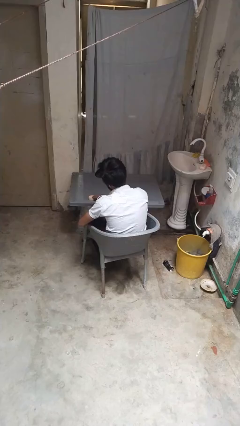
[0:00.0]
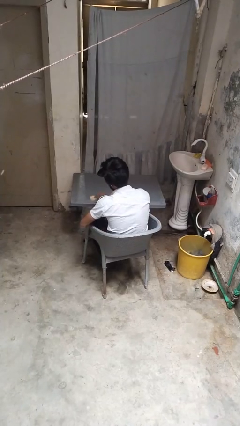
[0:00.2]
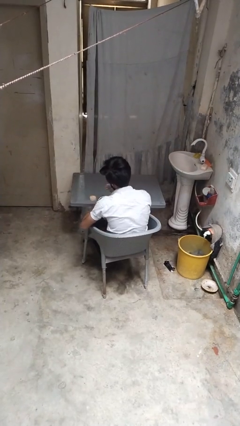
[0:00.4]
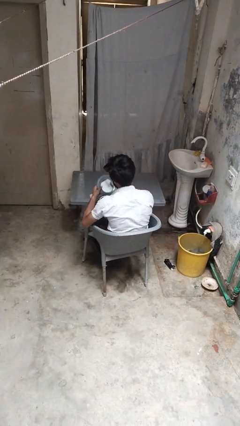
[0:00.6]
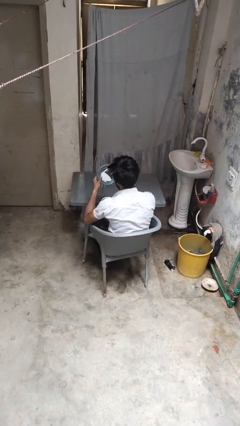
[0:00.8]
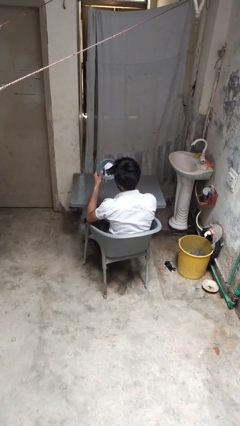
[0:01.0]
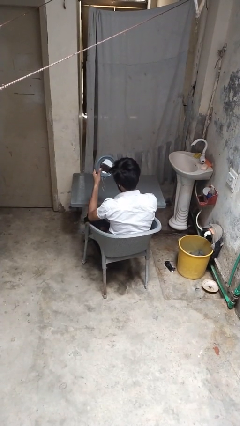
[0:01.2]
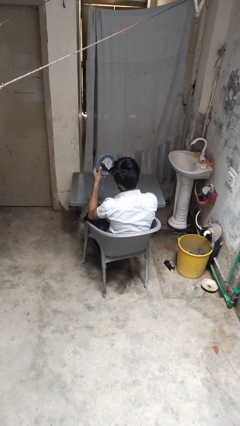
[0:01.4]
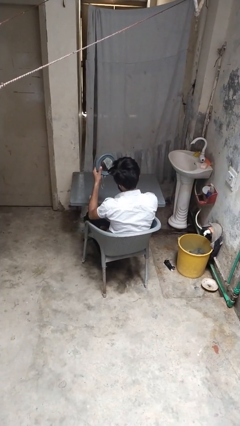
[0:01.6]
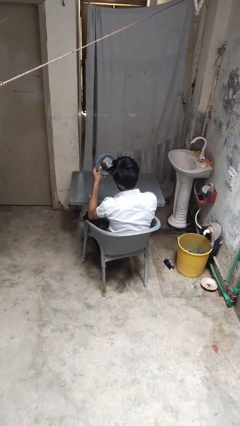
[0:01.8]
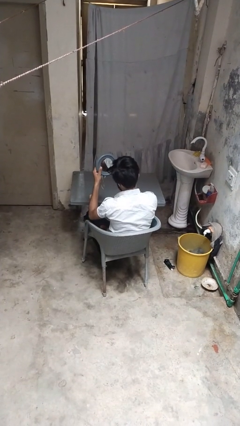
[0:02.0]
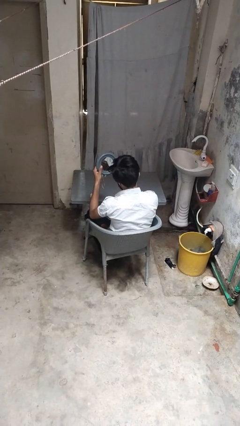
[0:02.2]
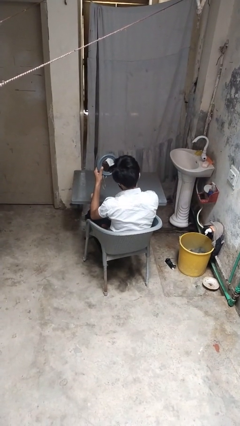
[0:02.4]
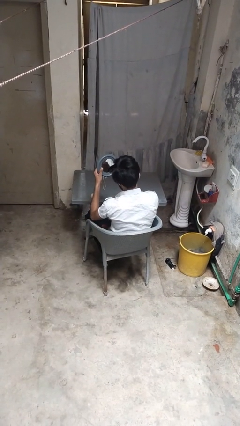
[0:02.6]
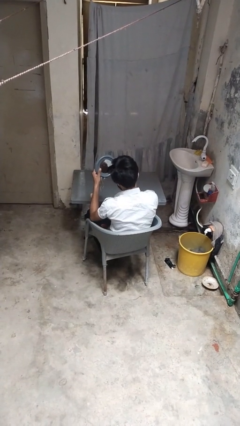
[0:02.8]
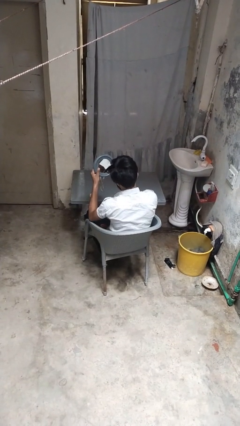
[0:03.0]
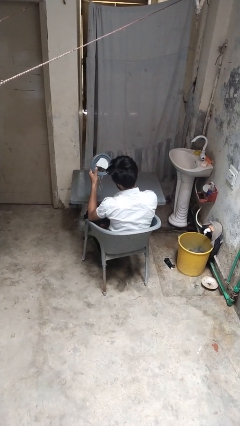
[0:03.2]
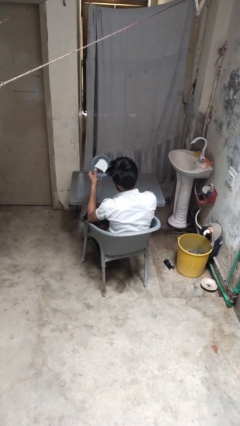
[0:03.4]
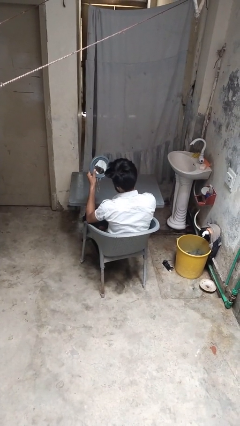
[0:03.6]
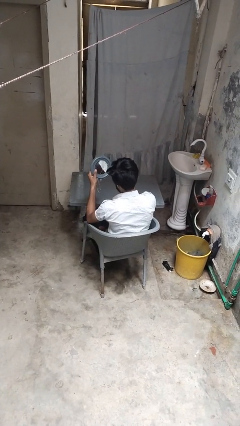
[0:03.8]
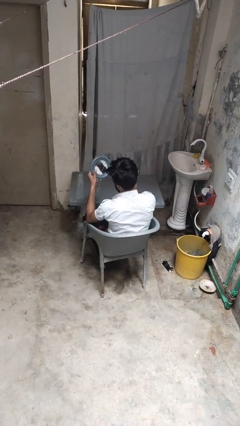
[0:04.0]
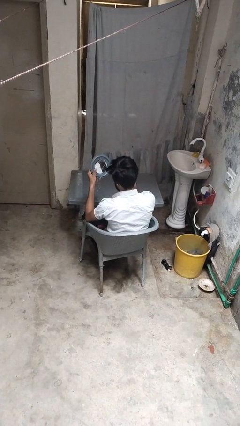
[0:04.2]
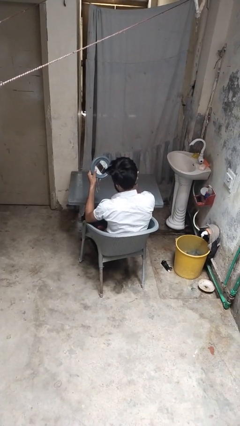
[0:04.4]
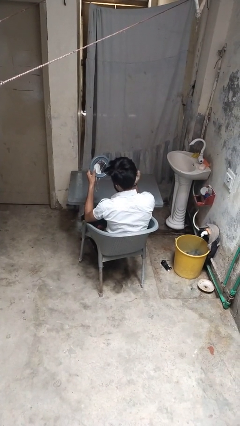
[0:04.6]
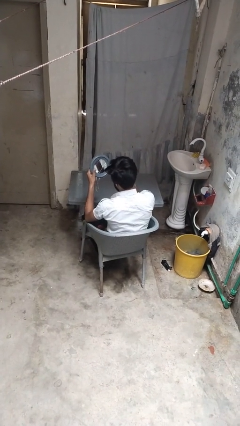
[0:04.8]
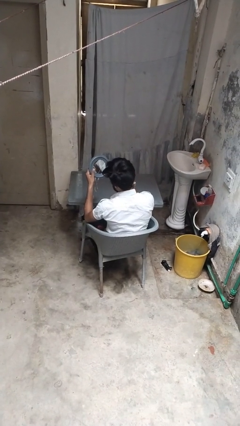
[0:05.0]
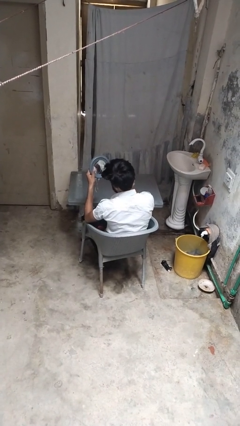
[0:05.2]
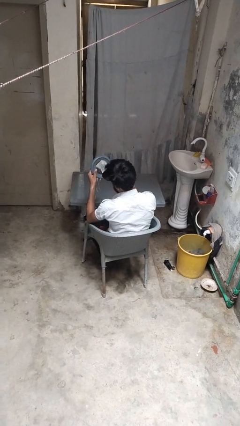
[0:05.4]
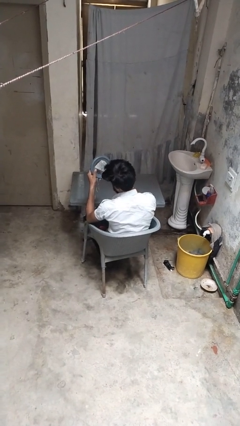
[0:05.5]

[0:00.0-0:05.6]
person applies foundation makeup

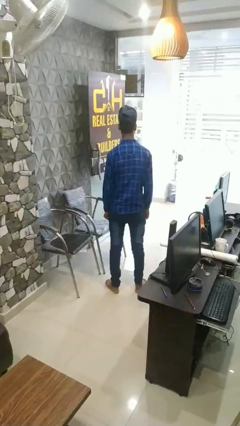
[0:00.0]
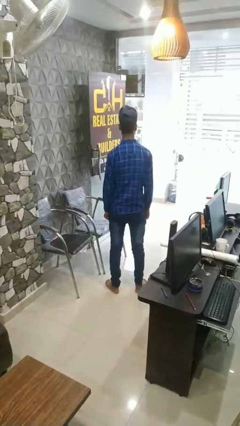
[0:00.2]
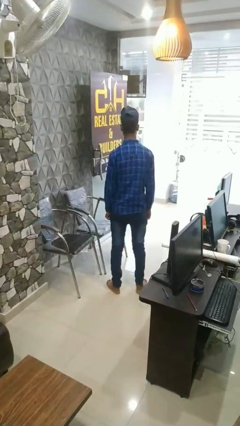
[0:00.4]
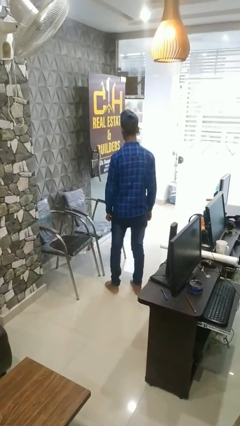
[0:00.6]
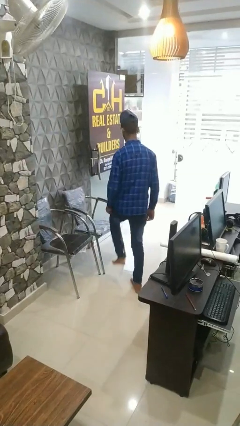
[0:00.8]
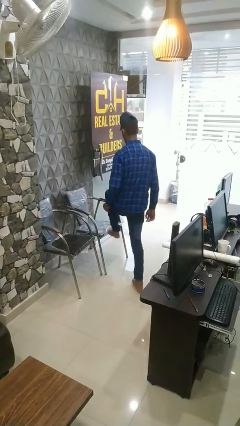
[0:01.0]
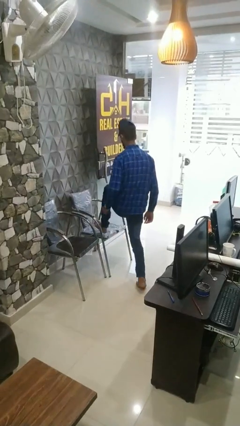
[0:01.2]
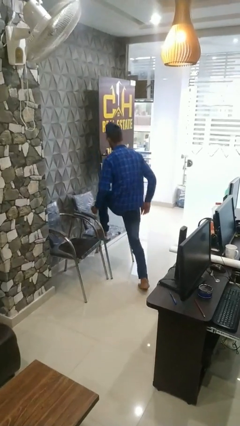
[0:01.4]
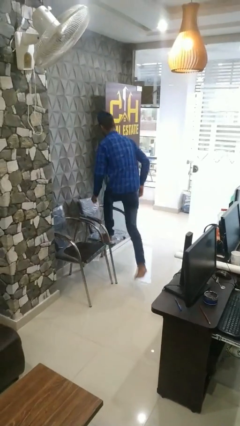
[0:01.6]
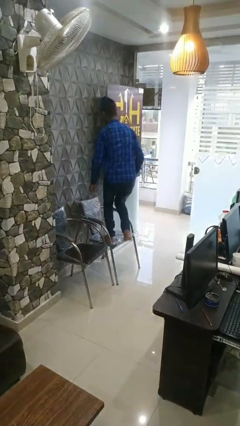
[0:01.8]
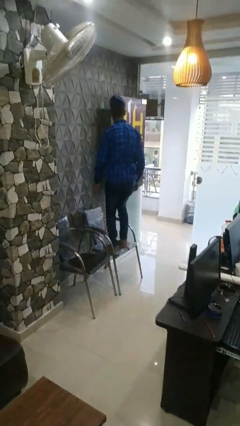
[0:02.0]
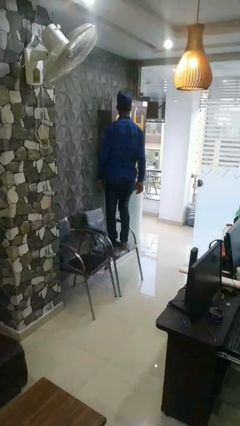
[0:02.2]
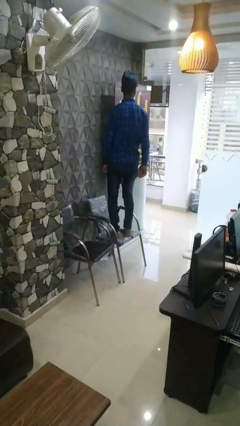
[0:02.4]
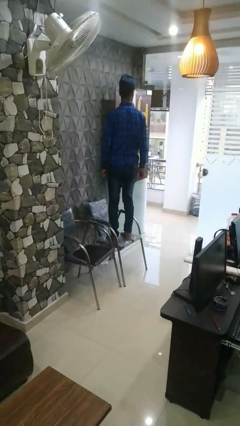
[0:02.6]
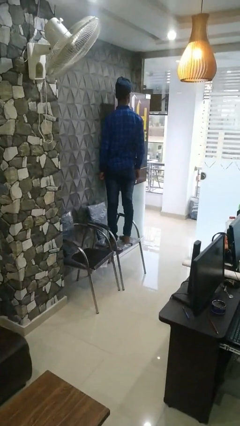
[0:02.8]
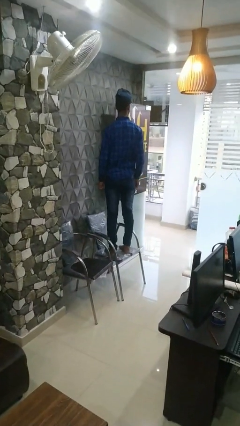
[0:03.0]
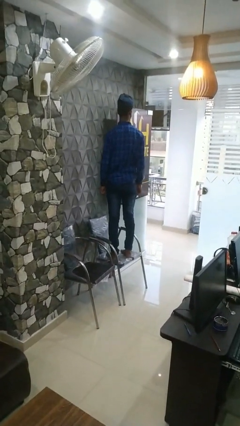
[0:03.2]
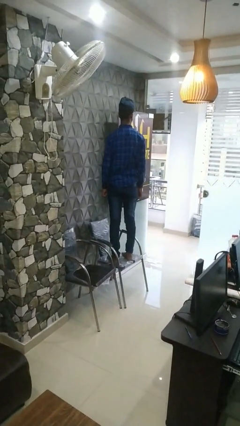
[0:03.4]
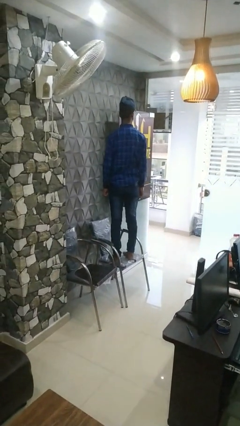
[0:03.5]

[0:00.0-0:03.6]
person climbs on chair

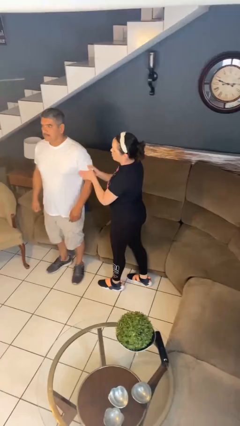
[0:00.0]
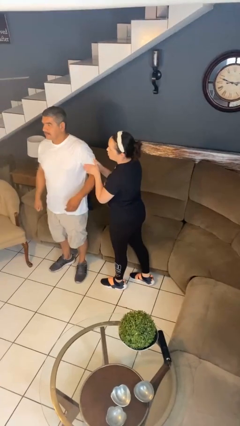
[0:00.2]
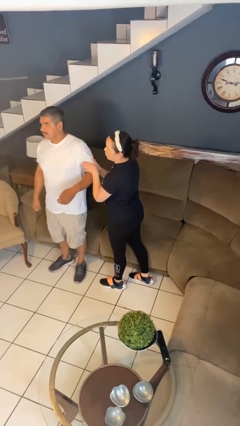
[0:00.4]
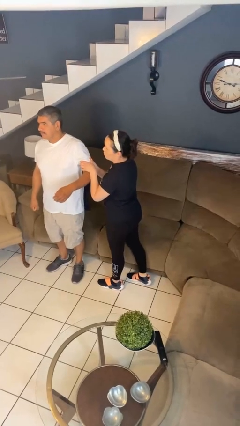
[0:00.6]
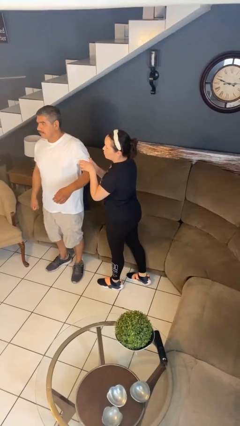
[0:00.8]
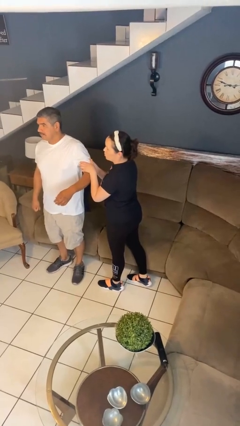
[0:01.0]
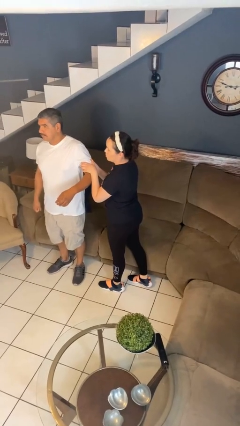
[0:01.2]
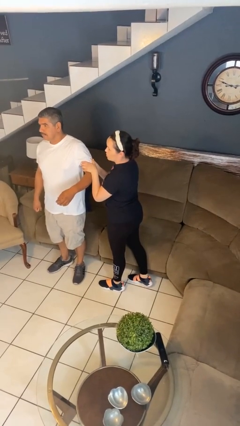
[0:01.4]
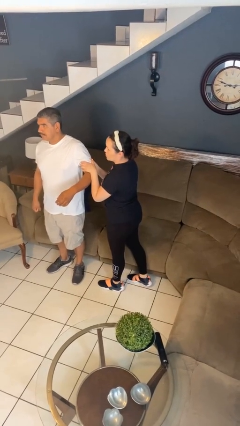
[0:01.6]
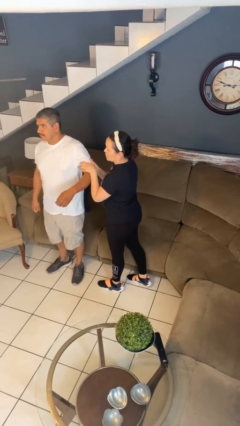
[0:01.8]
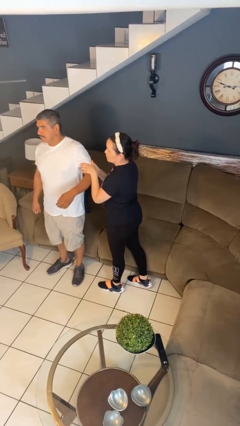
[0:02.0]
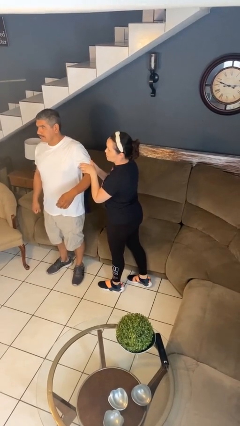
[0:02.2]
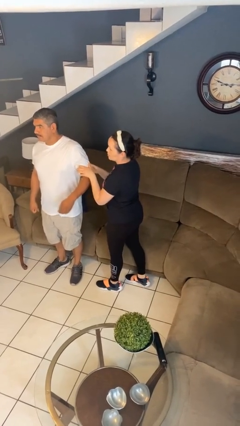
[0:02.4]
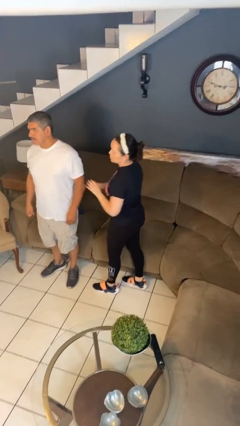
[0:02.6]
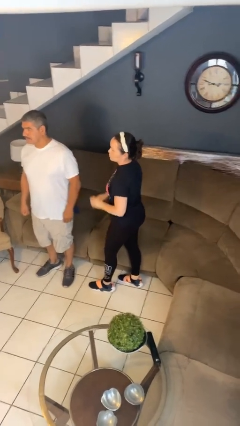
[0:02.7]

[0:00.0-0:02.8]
person grabs person by bicep

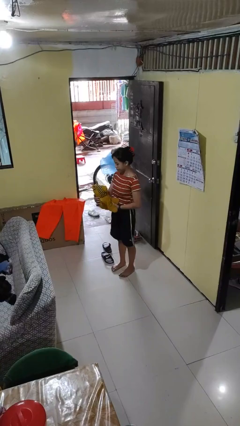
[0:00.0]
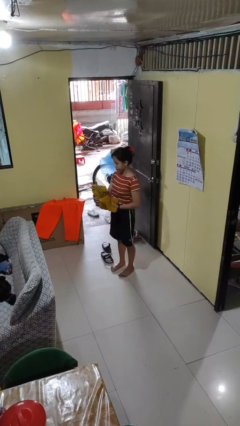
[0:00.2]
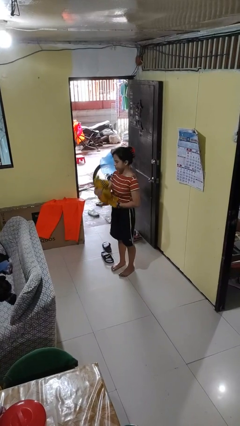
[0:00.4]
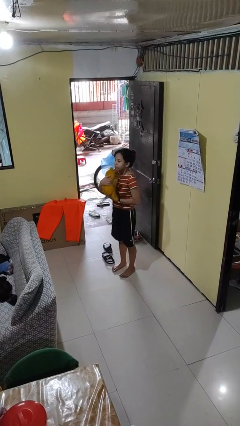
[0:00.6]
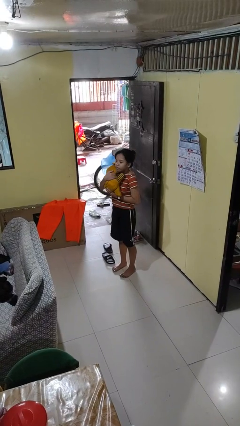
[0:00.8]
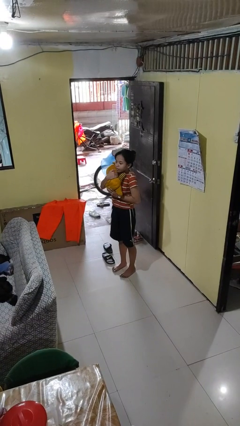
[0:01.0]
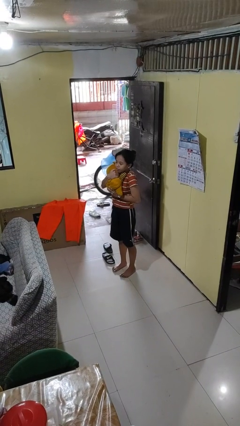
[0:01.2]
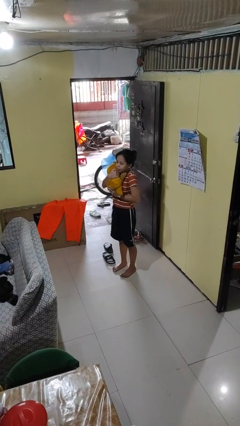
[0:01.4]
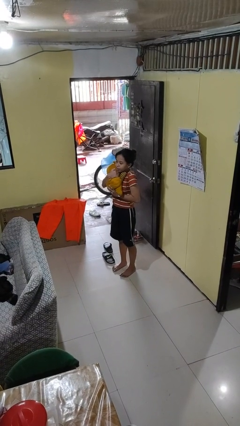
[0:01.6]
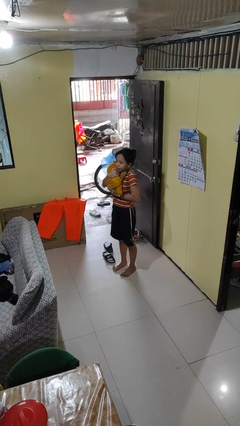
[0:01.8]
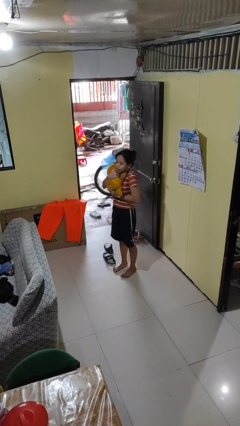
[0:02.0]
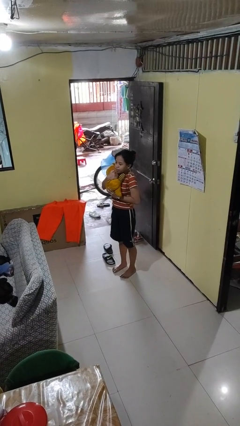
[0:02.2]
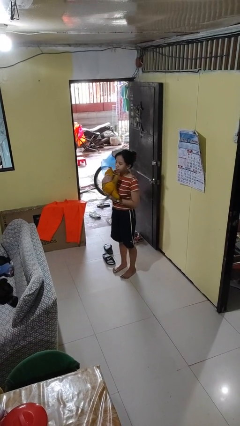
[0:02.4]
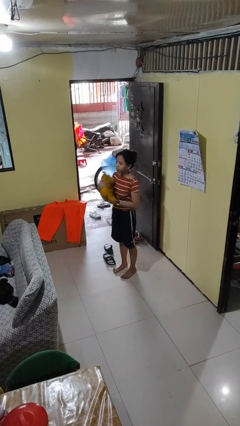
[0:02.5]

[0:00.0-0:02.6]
person hugs stuffed animal

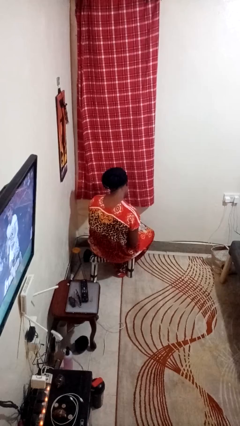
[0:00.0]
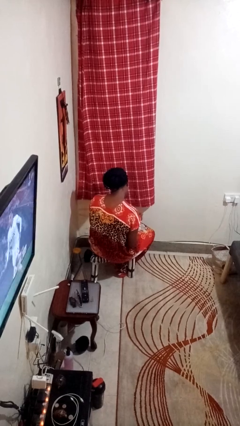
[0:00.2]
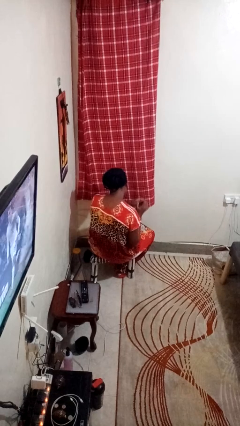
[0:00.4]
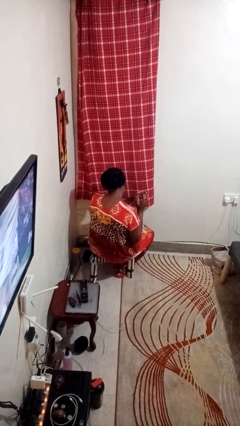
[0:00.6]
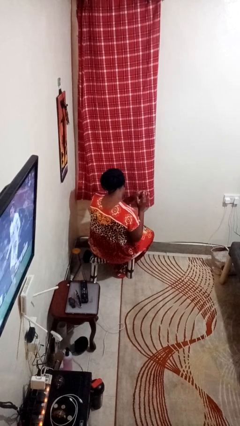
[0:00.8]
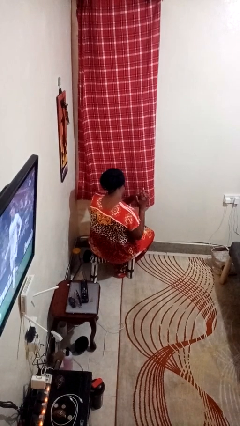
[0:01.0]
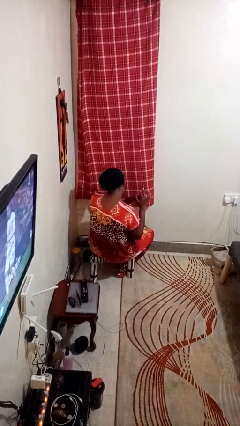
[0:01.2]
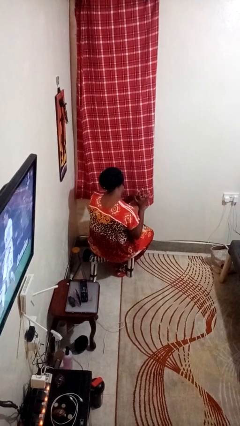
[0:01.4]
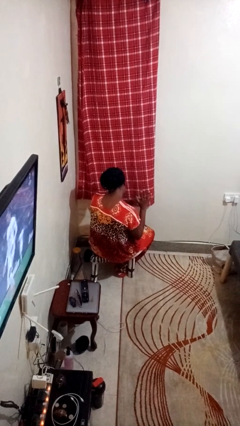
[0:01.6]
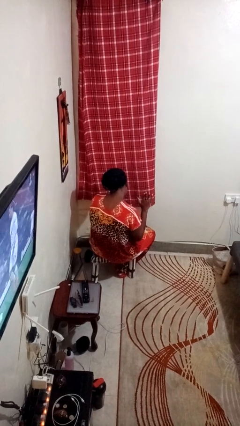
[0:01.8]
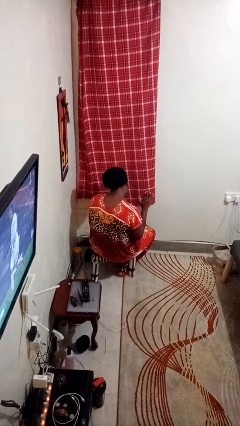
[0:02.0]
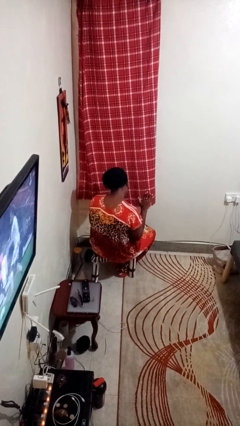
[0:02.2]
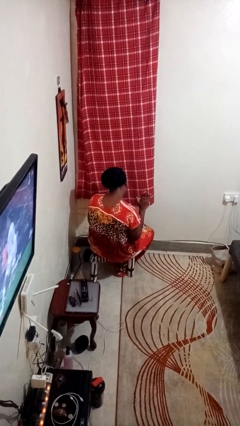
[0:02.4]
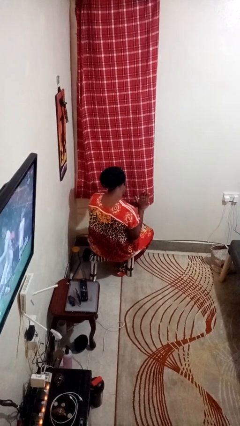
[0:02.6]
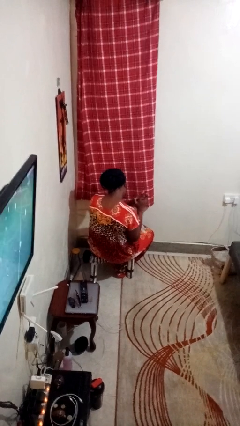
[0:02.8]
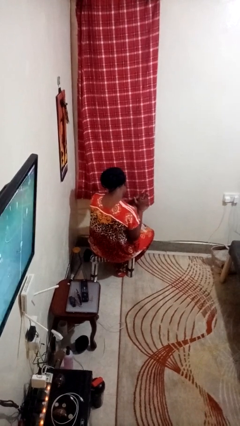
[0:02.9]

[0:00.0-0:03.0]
person puts on ring

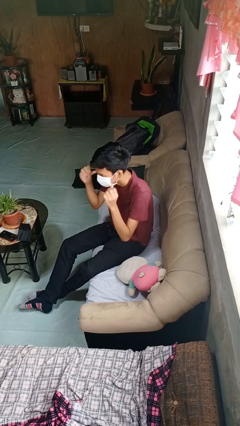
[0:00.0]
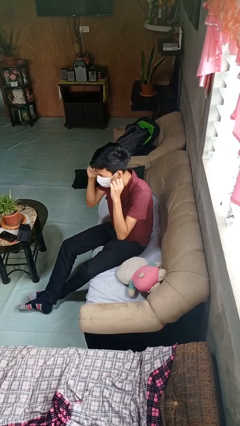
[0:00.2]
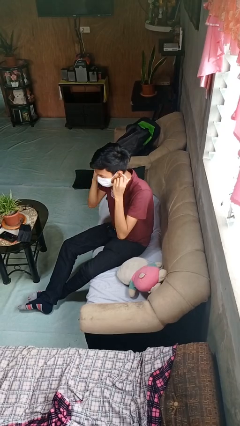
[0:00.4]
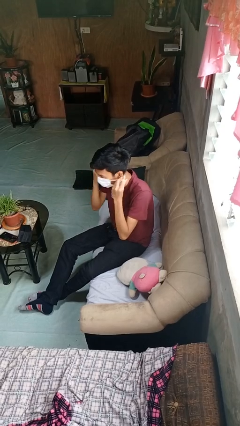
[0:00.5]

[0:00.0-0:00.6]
person takes off facemask
